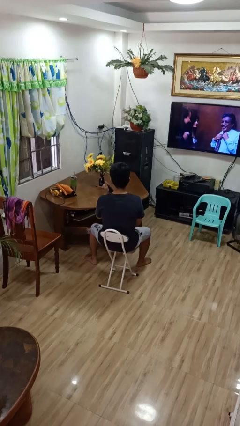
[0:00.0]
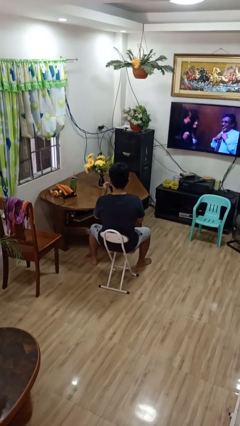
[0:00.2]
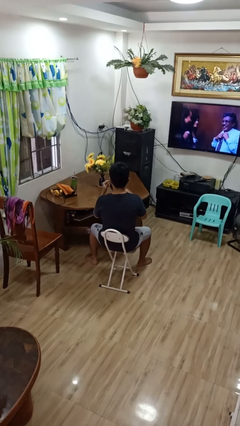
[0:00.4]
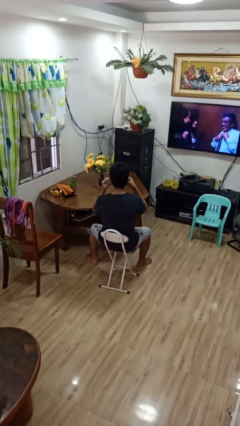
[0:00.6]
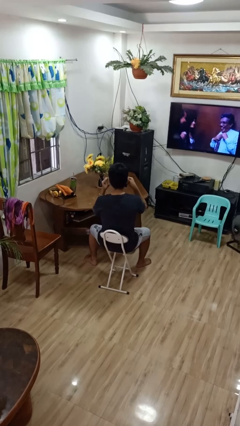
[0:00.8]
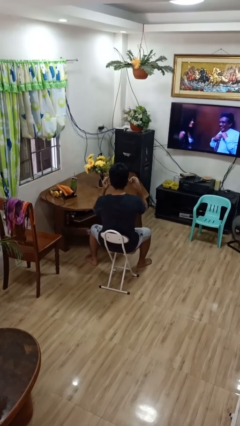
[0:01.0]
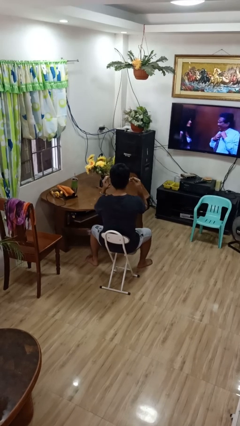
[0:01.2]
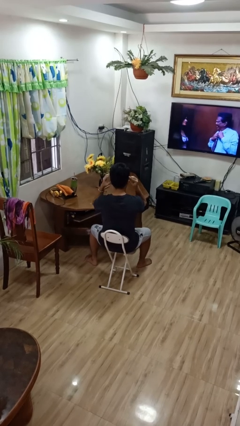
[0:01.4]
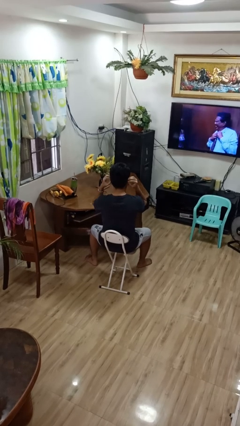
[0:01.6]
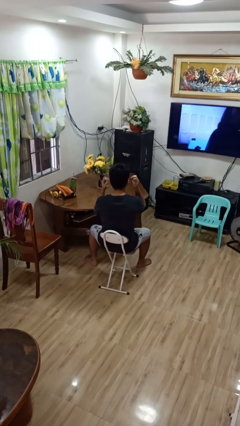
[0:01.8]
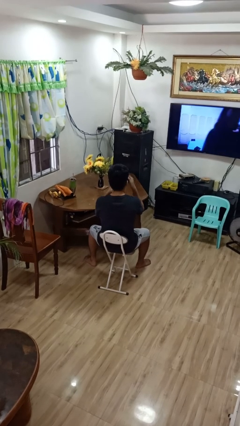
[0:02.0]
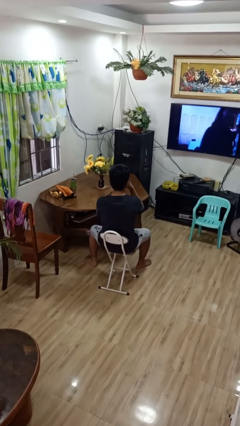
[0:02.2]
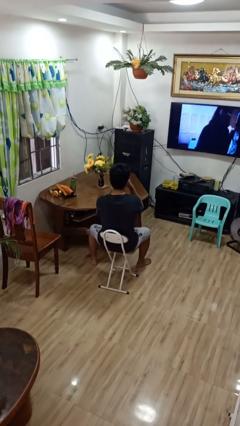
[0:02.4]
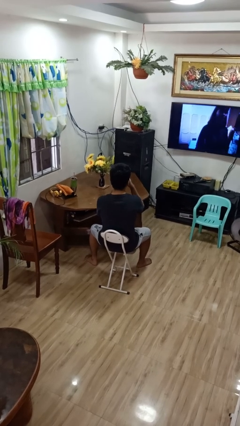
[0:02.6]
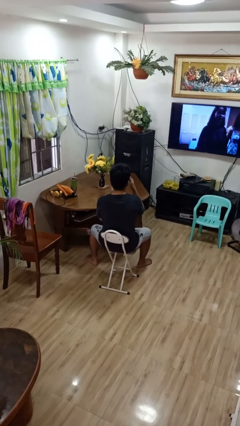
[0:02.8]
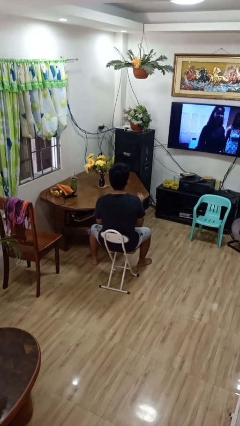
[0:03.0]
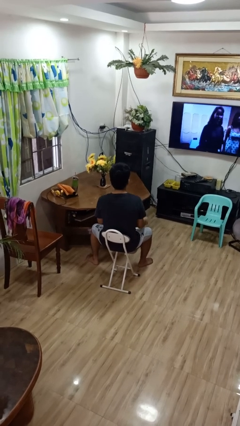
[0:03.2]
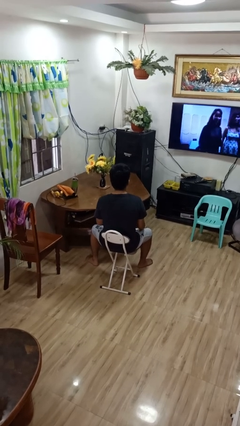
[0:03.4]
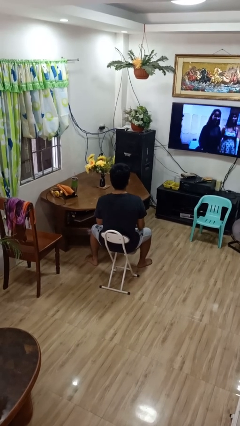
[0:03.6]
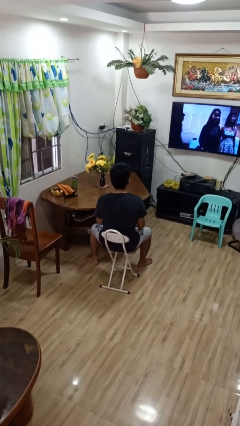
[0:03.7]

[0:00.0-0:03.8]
person puts on facemask

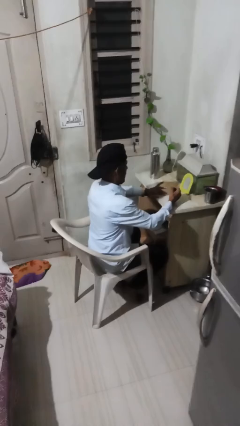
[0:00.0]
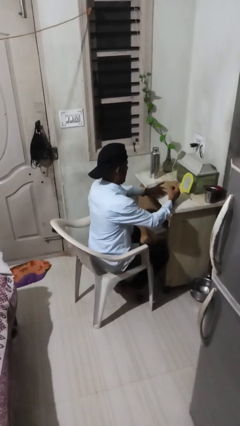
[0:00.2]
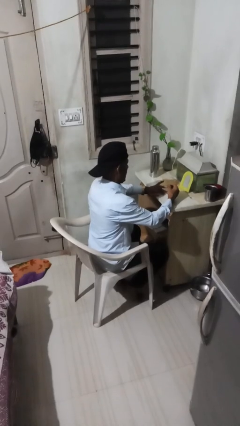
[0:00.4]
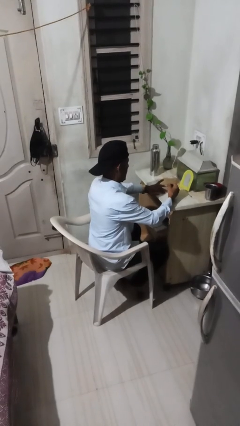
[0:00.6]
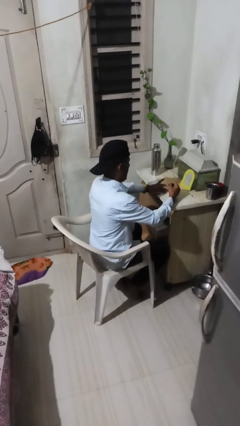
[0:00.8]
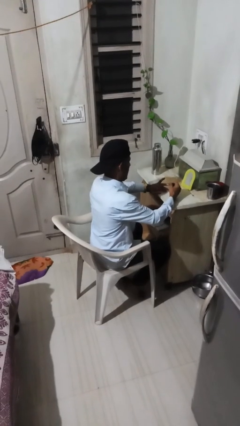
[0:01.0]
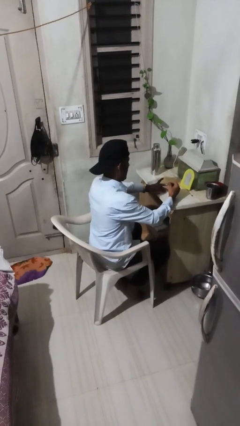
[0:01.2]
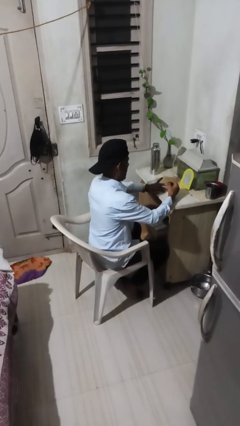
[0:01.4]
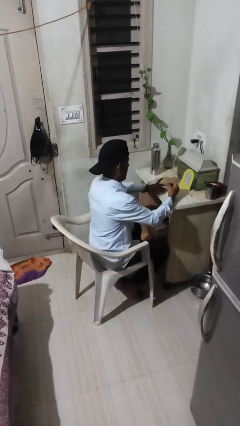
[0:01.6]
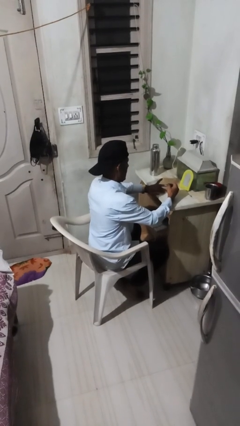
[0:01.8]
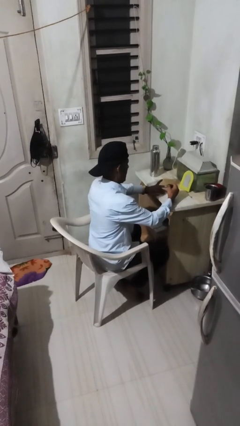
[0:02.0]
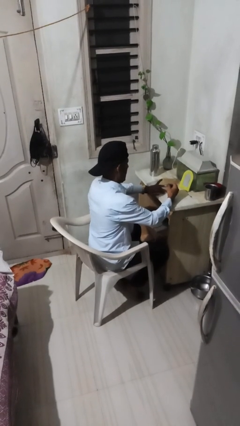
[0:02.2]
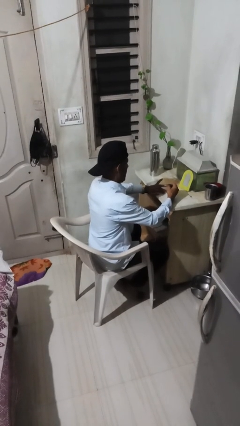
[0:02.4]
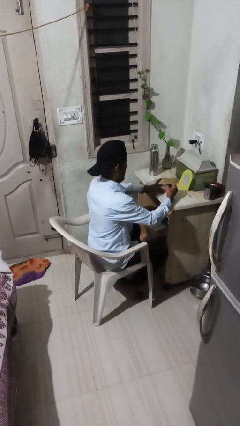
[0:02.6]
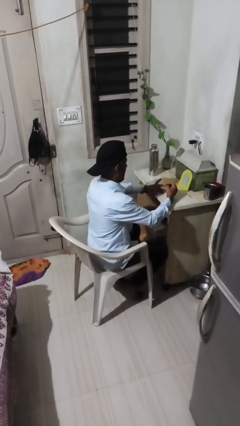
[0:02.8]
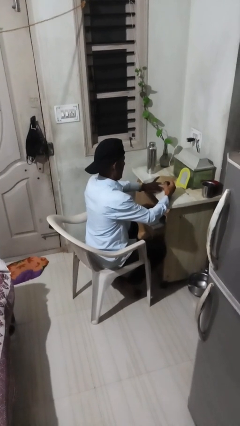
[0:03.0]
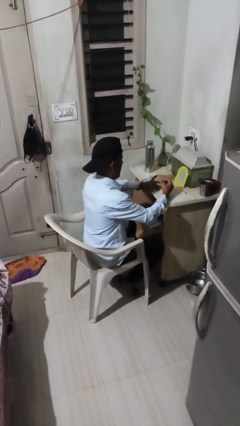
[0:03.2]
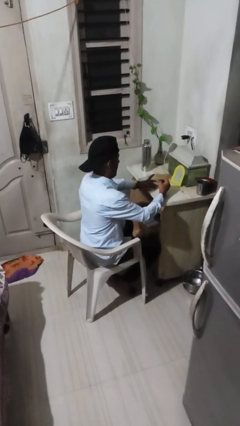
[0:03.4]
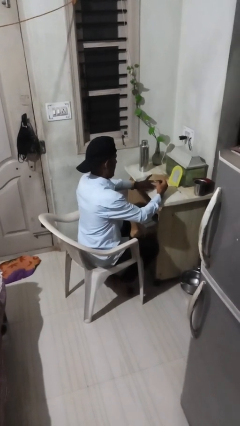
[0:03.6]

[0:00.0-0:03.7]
person paints fingernails

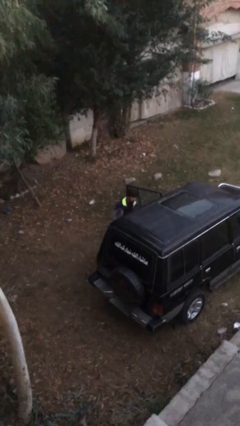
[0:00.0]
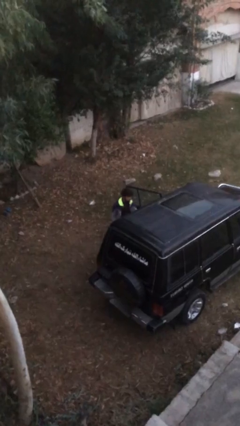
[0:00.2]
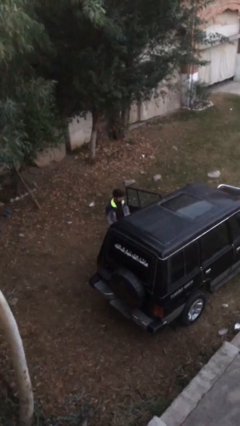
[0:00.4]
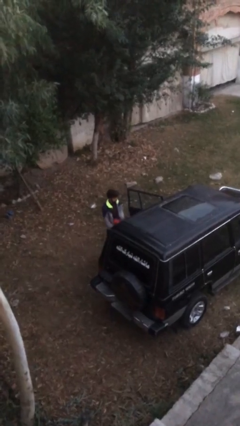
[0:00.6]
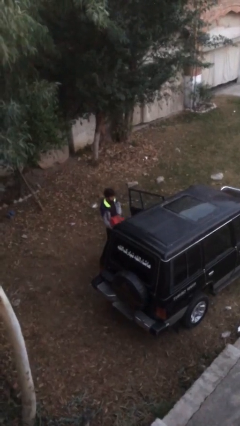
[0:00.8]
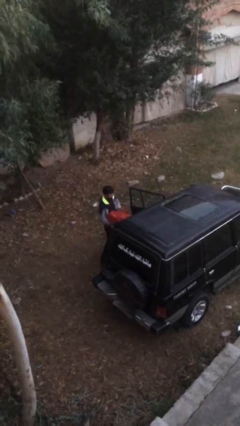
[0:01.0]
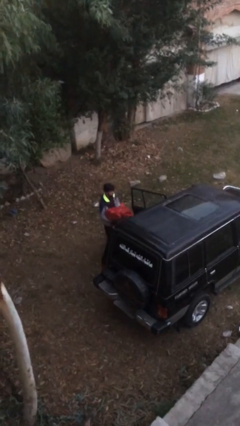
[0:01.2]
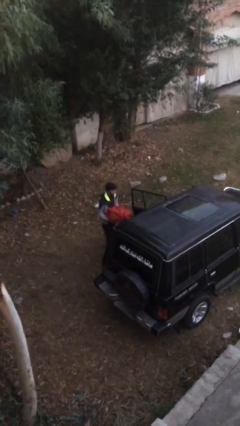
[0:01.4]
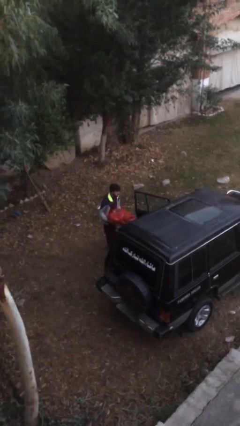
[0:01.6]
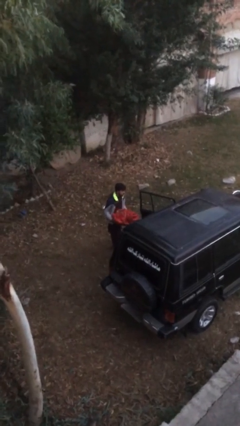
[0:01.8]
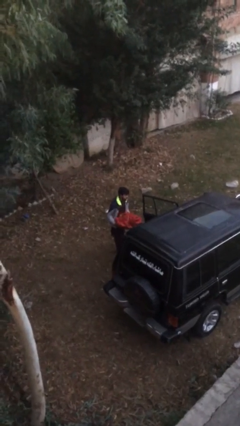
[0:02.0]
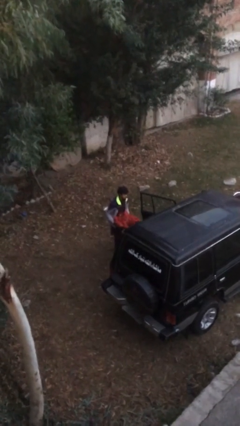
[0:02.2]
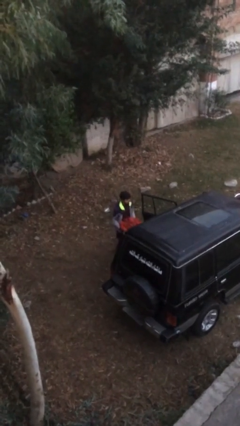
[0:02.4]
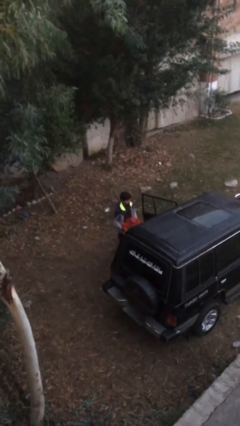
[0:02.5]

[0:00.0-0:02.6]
person unloads car

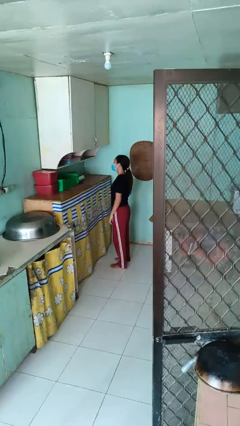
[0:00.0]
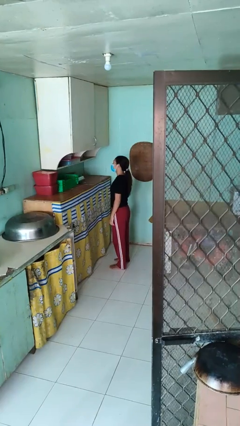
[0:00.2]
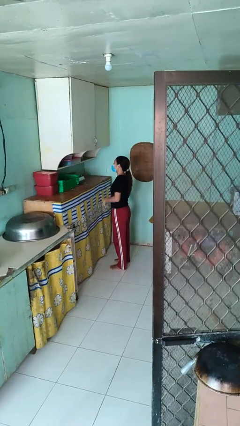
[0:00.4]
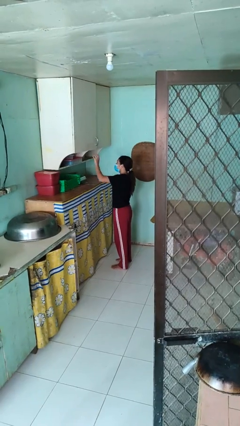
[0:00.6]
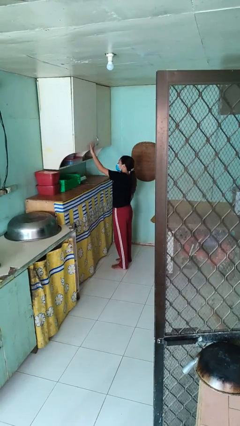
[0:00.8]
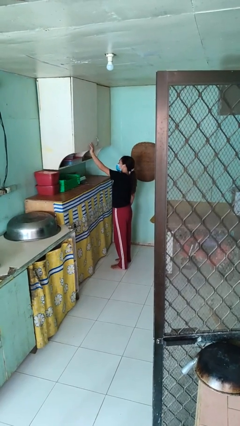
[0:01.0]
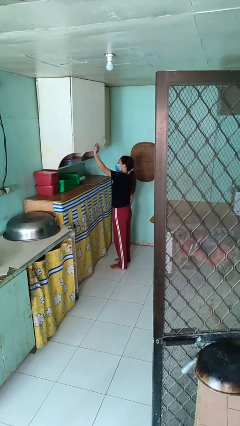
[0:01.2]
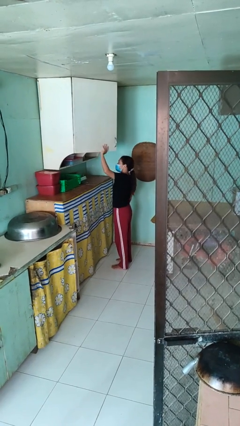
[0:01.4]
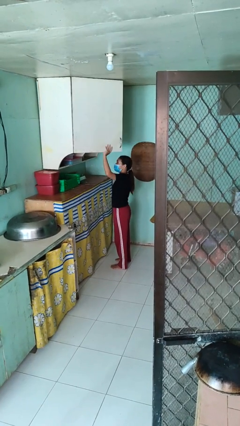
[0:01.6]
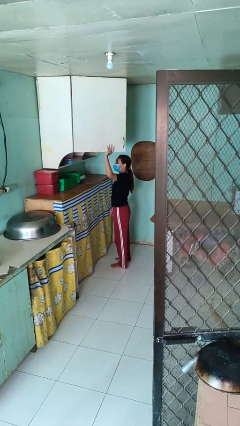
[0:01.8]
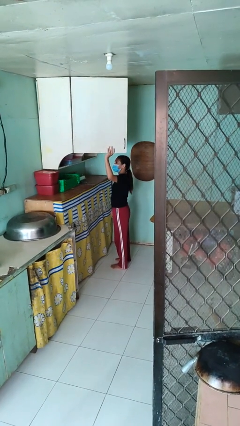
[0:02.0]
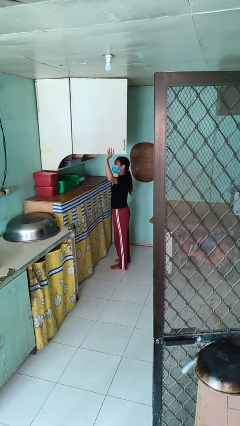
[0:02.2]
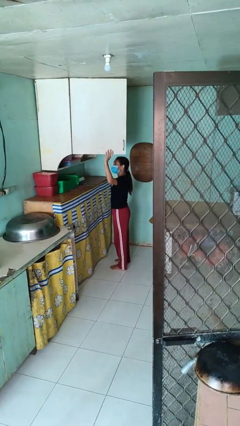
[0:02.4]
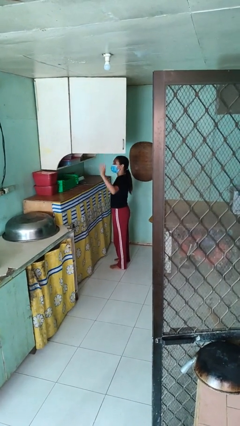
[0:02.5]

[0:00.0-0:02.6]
person opens cabinet

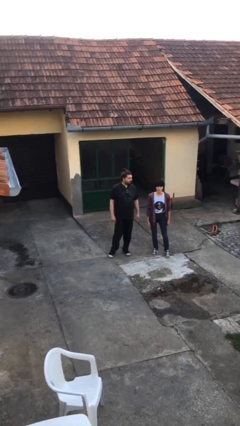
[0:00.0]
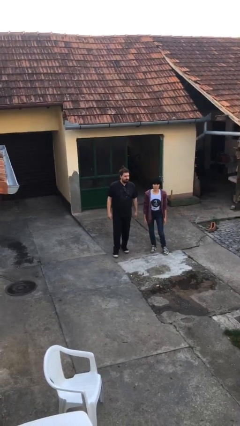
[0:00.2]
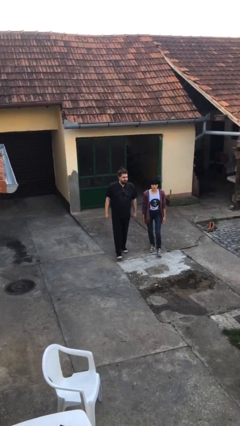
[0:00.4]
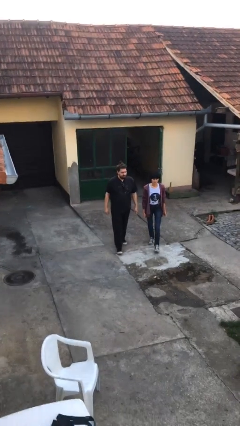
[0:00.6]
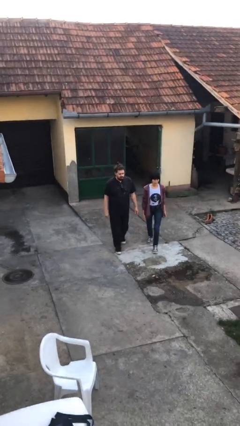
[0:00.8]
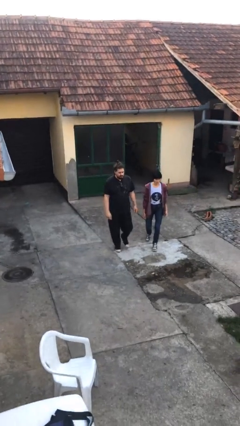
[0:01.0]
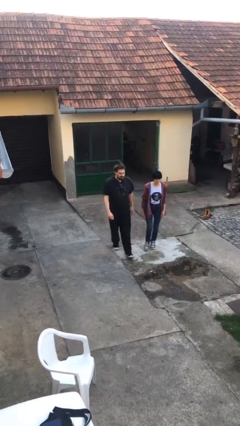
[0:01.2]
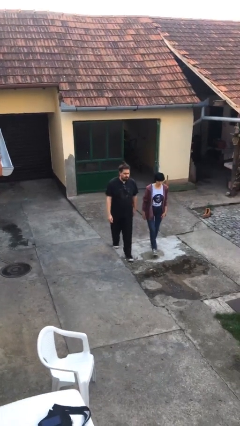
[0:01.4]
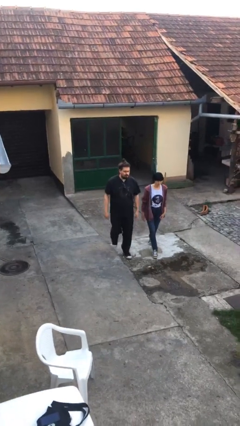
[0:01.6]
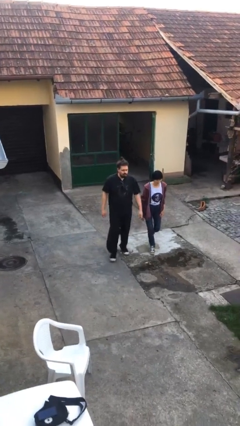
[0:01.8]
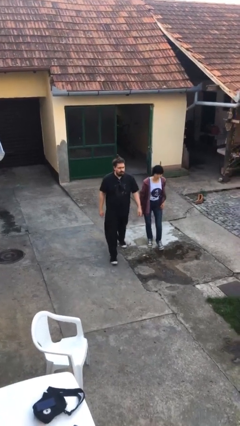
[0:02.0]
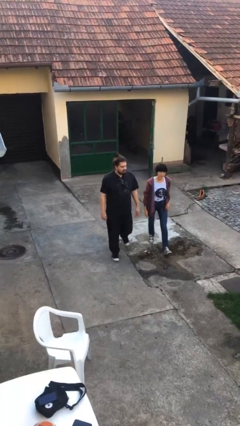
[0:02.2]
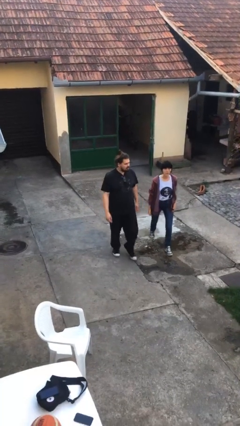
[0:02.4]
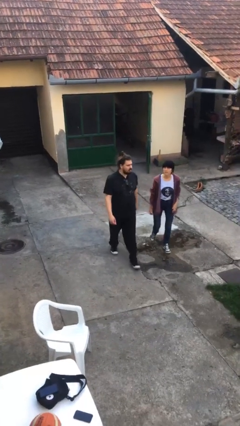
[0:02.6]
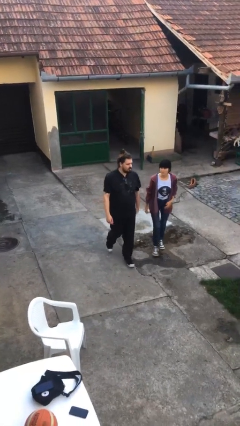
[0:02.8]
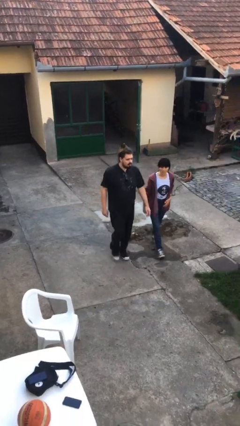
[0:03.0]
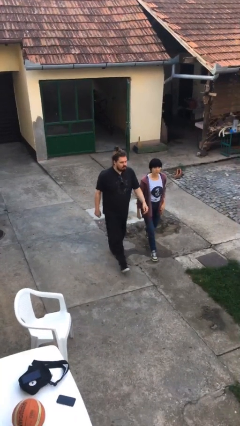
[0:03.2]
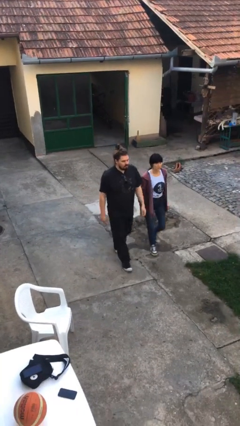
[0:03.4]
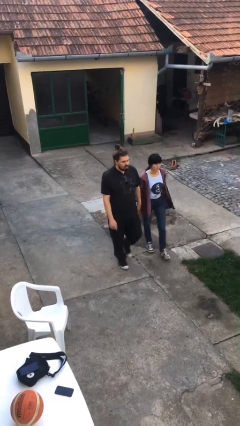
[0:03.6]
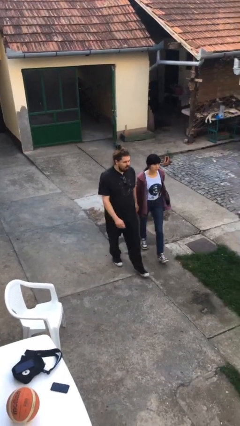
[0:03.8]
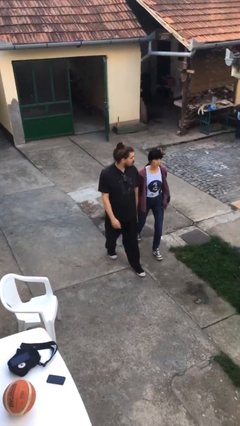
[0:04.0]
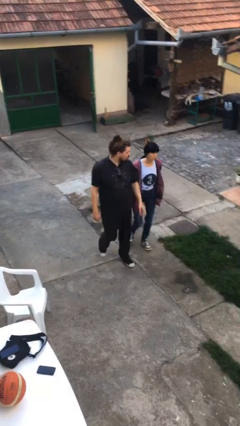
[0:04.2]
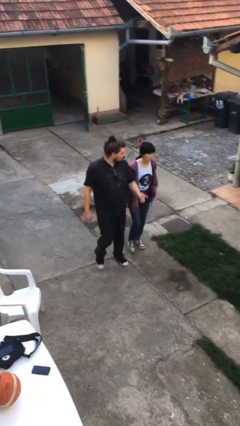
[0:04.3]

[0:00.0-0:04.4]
person talks to person

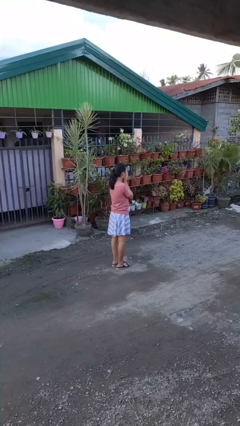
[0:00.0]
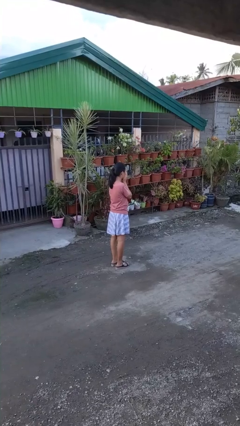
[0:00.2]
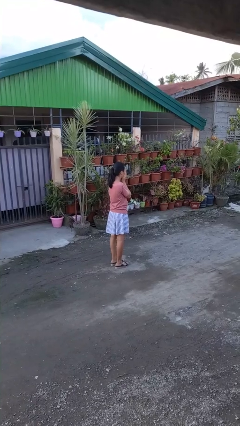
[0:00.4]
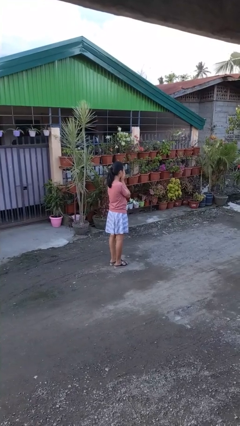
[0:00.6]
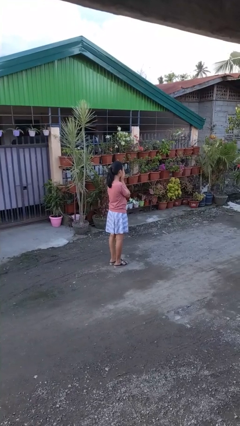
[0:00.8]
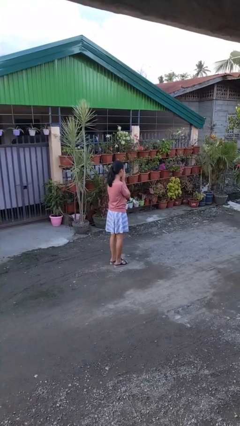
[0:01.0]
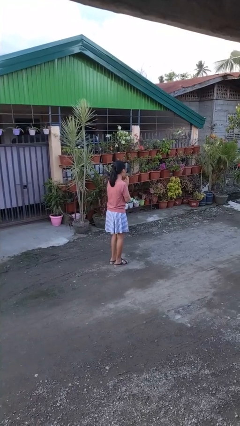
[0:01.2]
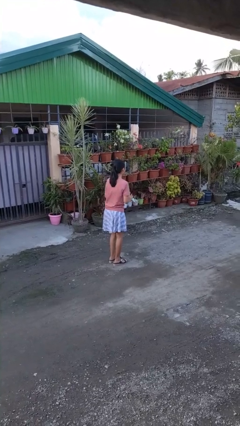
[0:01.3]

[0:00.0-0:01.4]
person blows into hands
